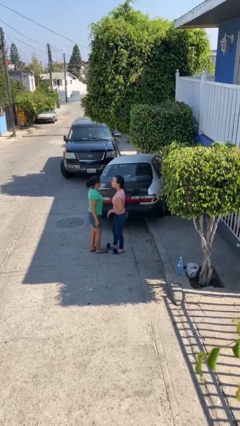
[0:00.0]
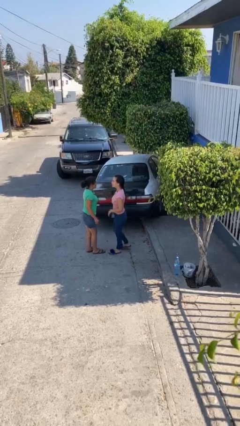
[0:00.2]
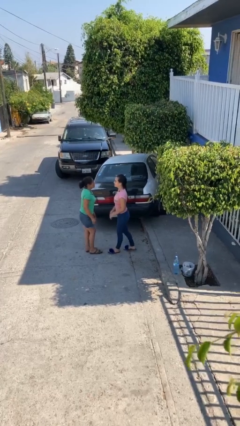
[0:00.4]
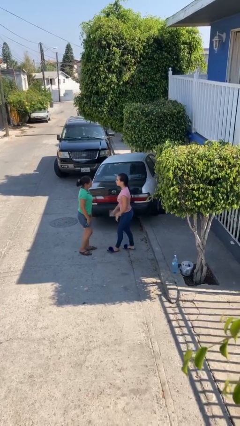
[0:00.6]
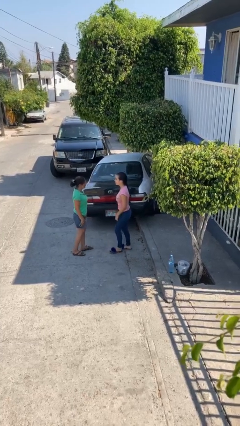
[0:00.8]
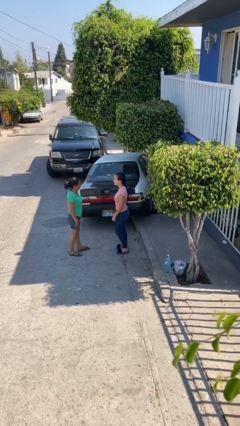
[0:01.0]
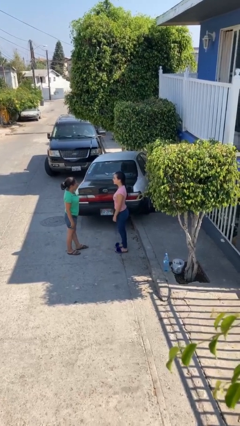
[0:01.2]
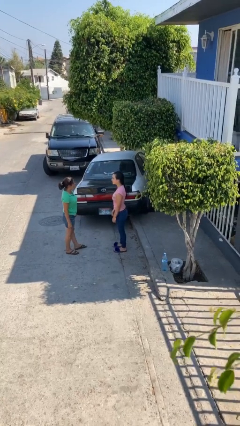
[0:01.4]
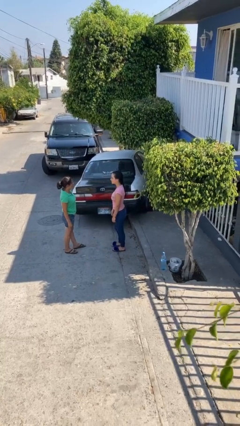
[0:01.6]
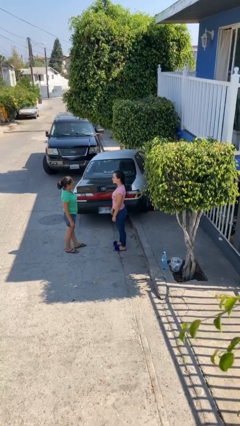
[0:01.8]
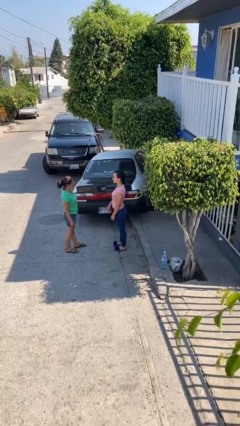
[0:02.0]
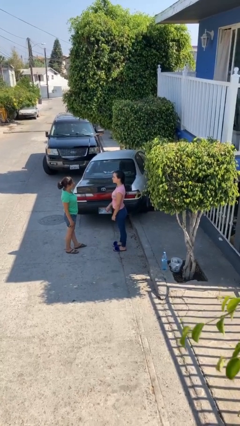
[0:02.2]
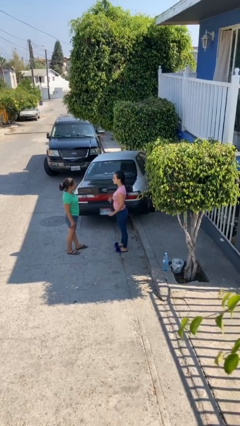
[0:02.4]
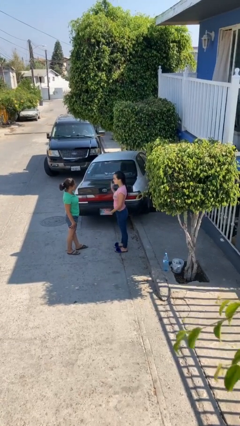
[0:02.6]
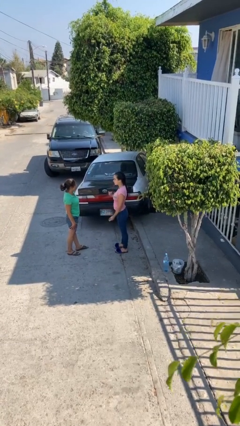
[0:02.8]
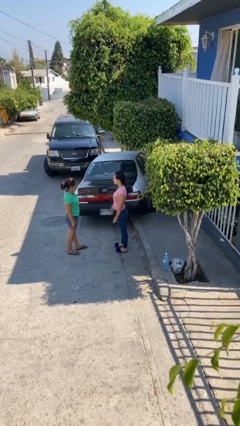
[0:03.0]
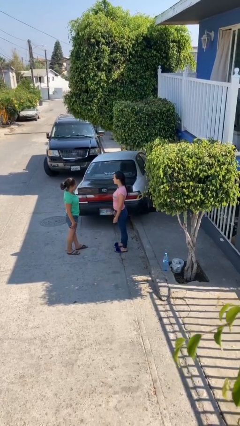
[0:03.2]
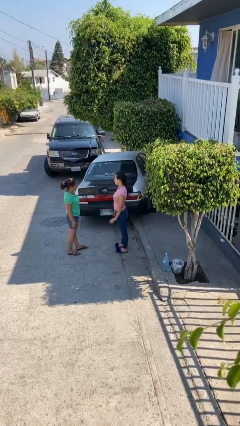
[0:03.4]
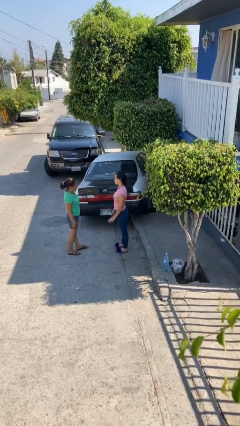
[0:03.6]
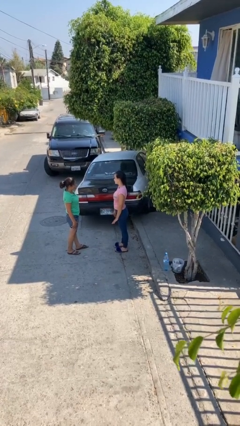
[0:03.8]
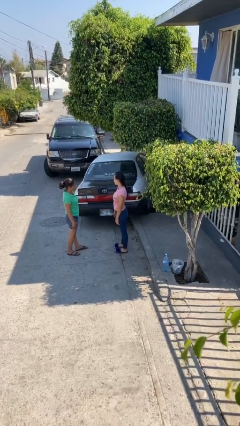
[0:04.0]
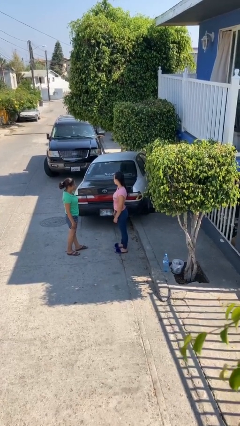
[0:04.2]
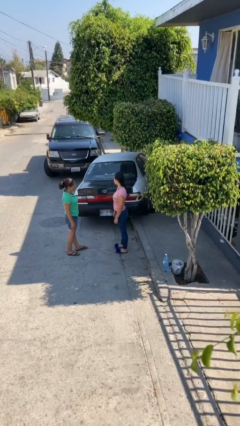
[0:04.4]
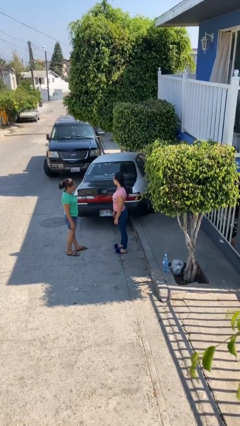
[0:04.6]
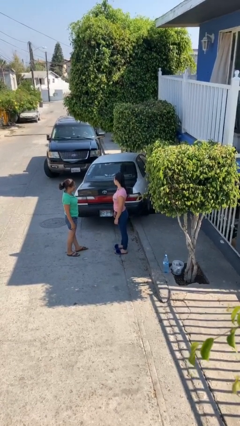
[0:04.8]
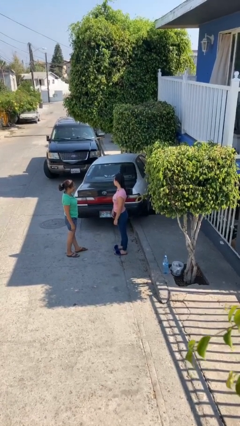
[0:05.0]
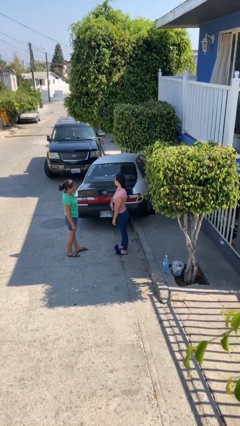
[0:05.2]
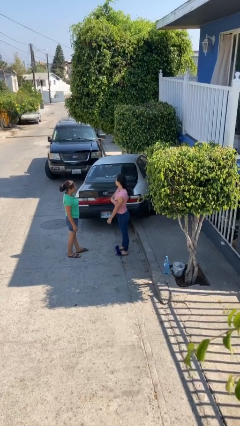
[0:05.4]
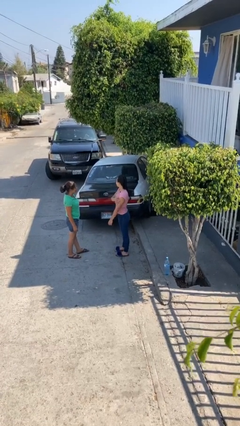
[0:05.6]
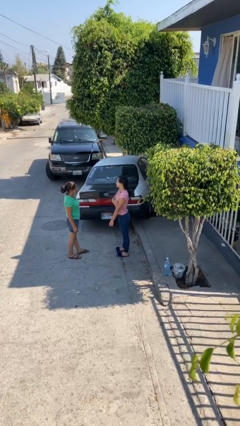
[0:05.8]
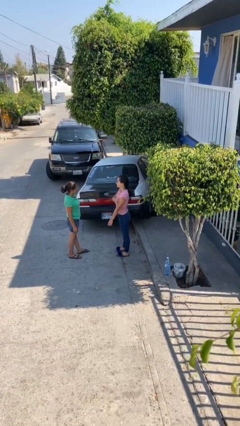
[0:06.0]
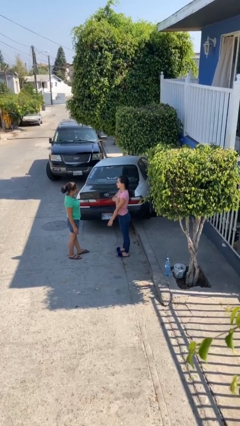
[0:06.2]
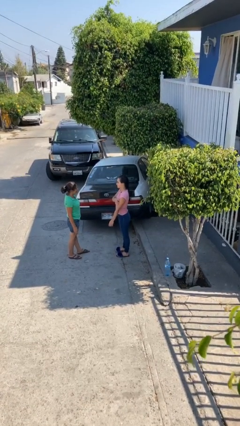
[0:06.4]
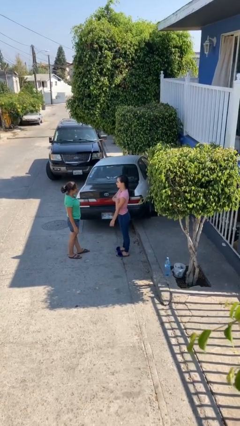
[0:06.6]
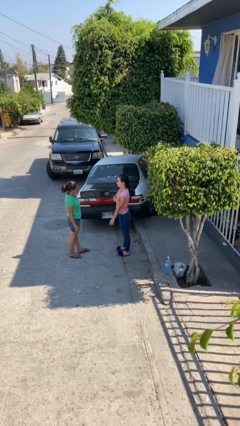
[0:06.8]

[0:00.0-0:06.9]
person talks to person

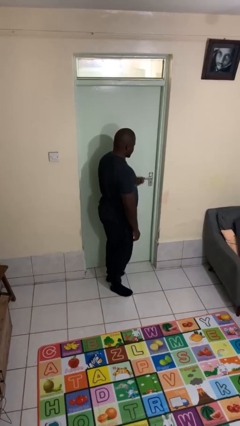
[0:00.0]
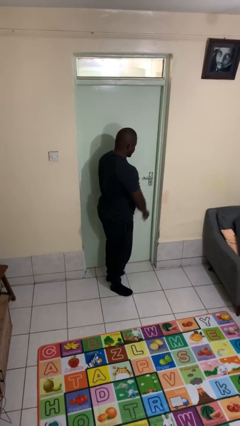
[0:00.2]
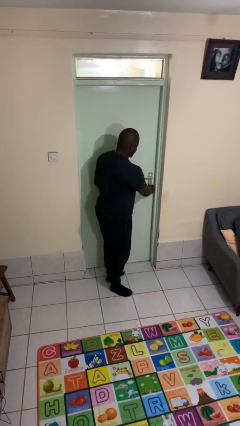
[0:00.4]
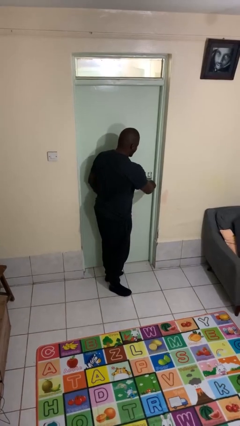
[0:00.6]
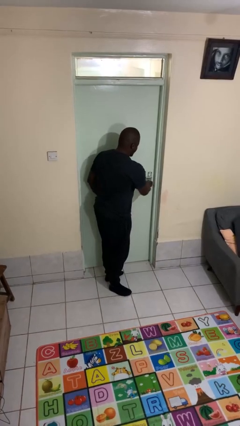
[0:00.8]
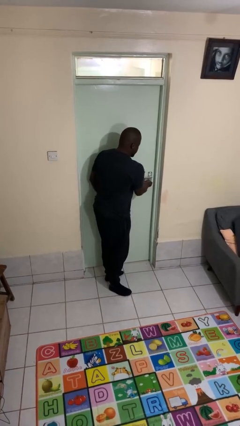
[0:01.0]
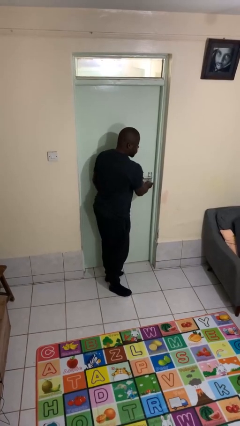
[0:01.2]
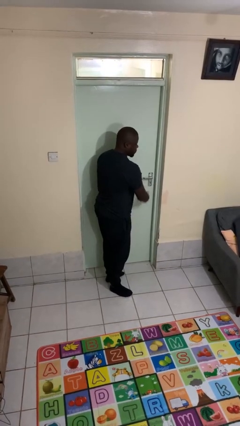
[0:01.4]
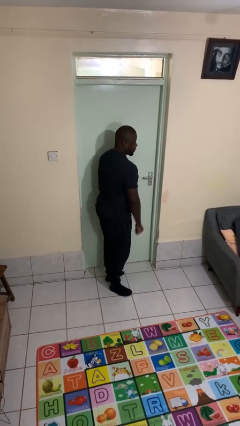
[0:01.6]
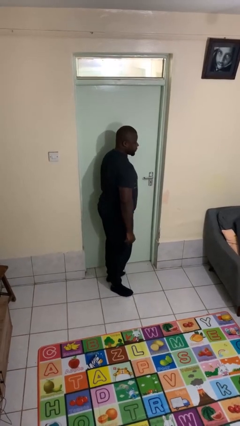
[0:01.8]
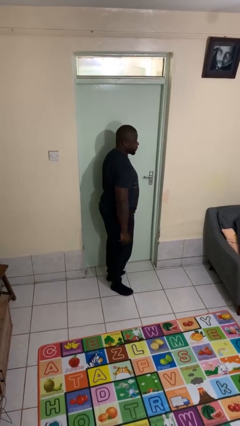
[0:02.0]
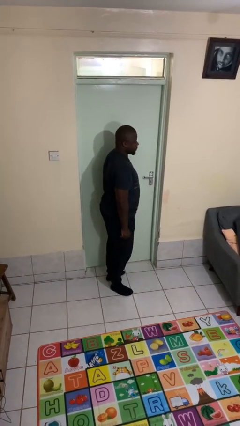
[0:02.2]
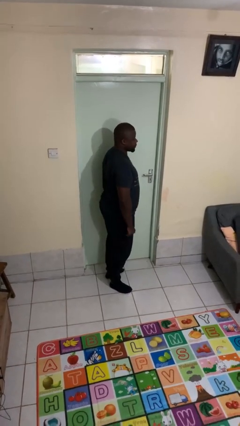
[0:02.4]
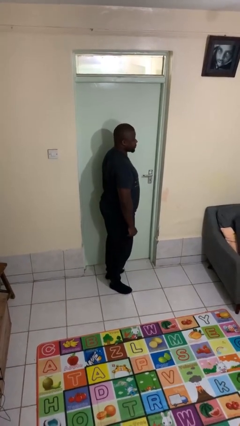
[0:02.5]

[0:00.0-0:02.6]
person locks door with keys

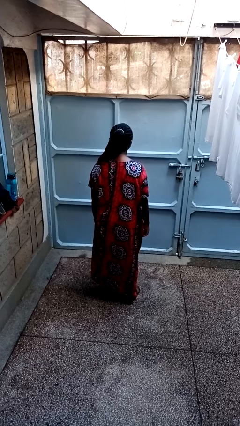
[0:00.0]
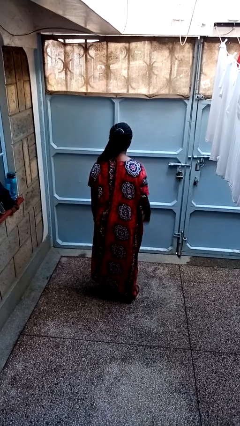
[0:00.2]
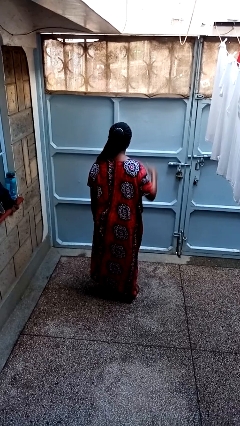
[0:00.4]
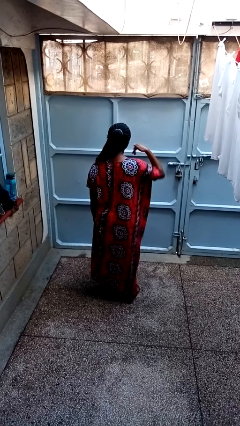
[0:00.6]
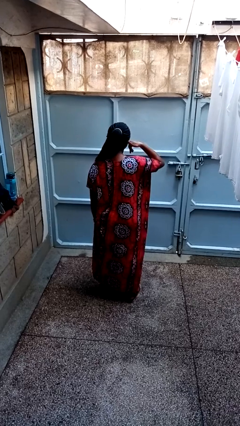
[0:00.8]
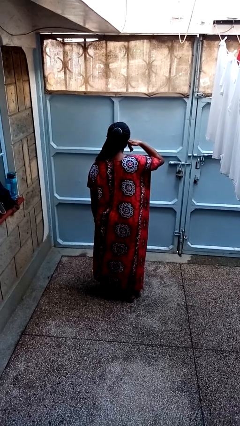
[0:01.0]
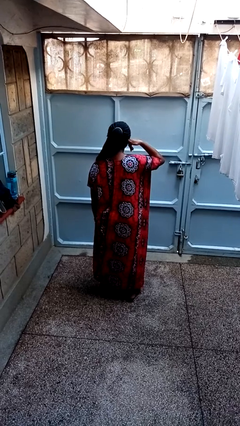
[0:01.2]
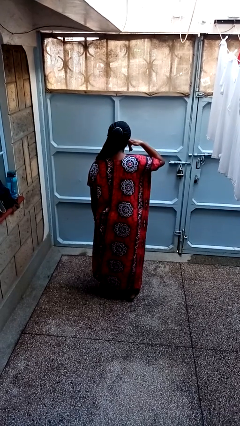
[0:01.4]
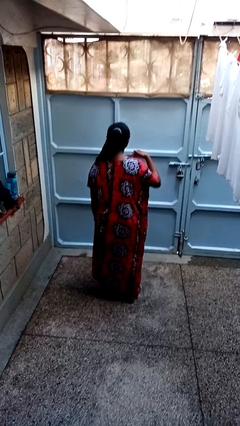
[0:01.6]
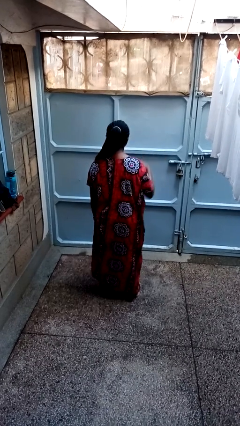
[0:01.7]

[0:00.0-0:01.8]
person gestures call me

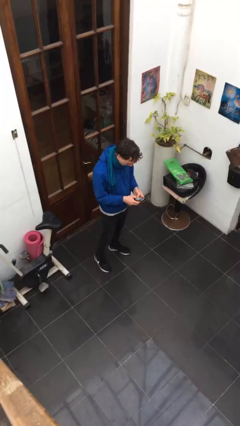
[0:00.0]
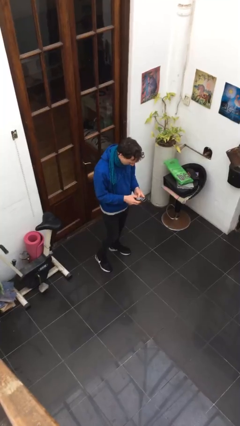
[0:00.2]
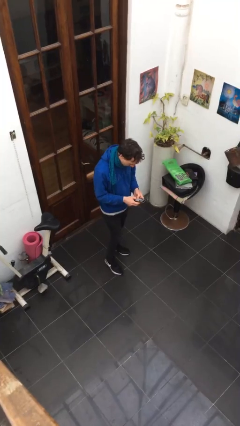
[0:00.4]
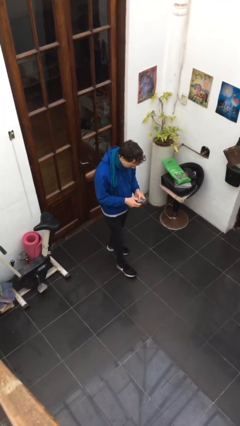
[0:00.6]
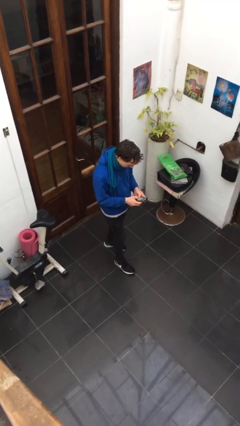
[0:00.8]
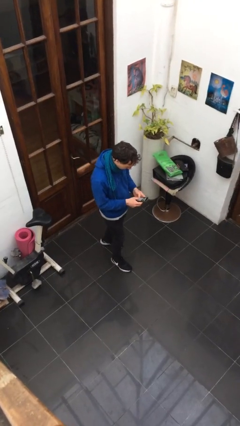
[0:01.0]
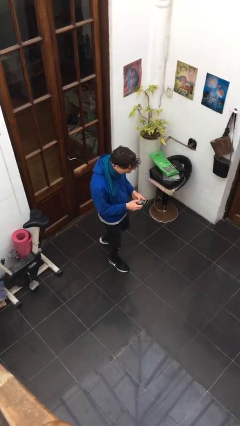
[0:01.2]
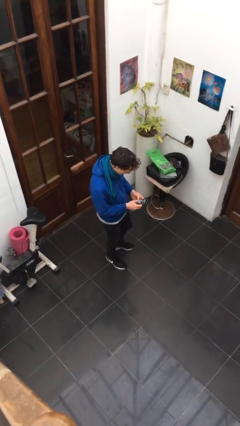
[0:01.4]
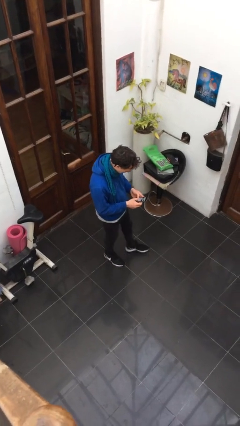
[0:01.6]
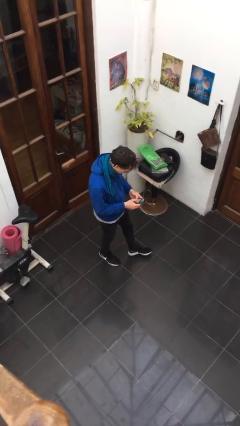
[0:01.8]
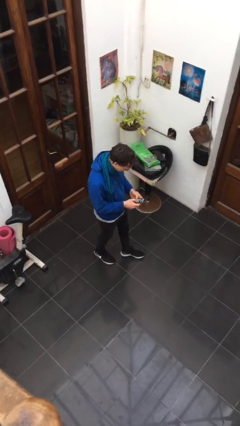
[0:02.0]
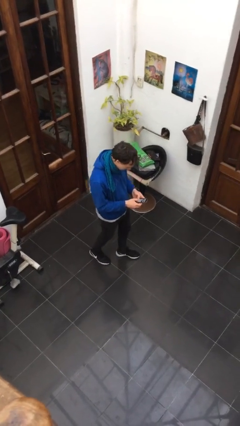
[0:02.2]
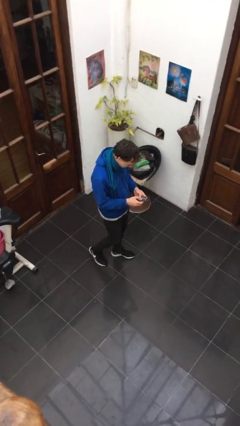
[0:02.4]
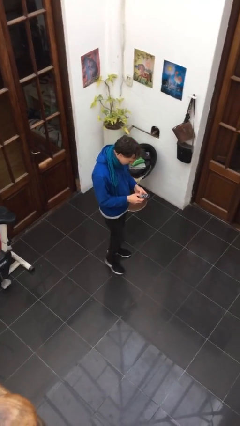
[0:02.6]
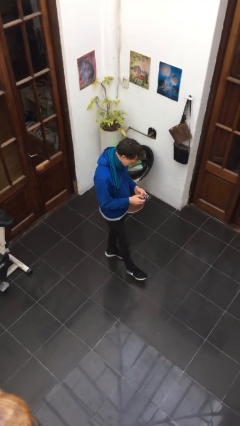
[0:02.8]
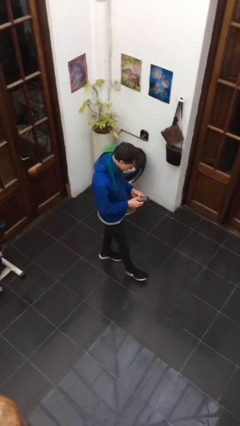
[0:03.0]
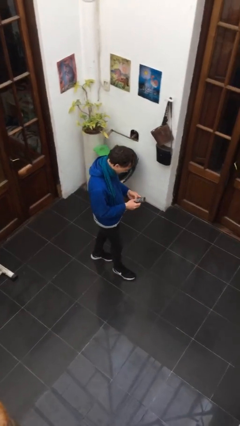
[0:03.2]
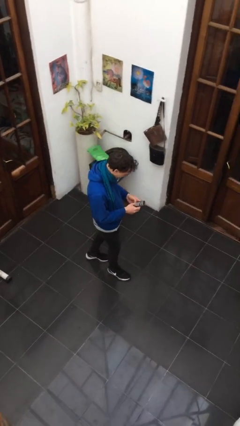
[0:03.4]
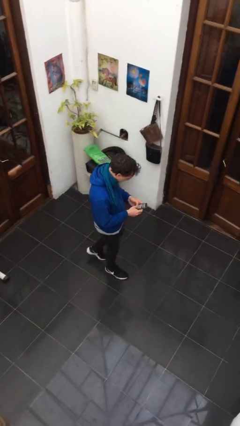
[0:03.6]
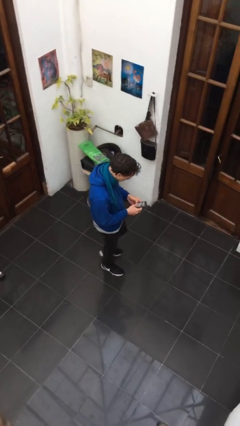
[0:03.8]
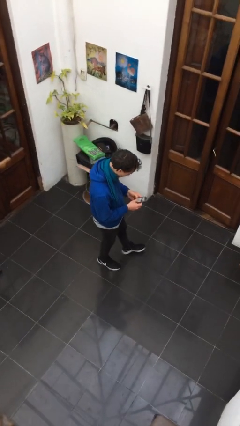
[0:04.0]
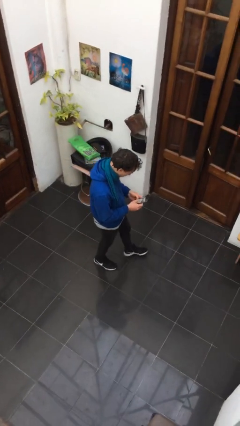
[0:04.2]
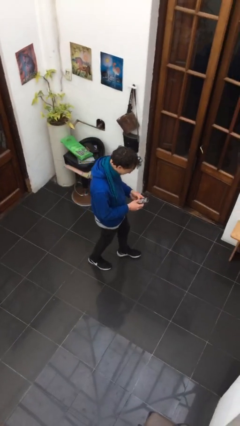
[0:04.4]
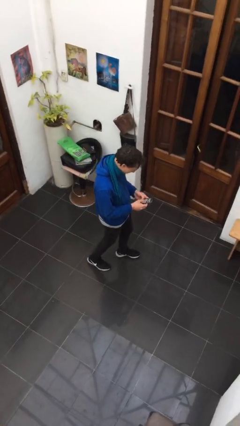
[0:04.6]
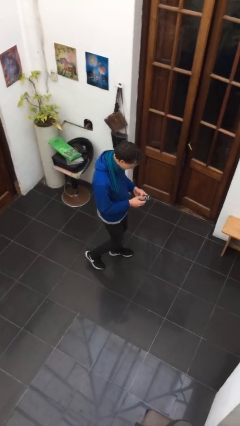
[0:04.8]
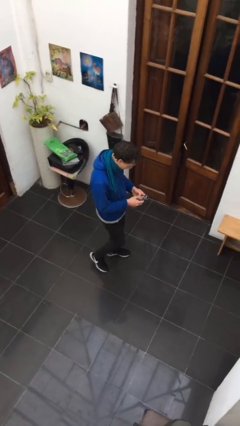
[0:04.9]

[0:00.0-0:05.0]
person texts on phone

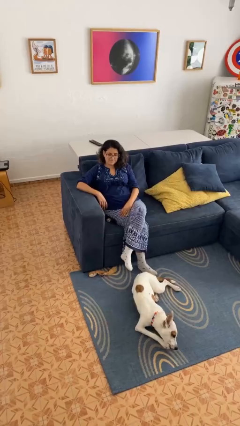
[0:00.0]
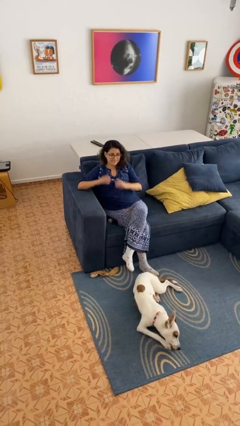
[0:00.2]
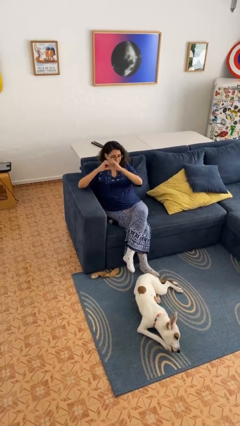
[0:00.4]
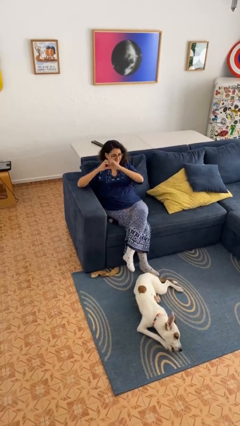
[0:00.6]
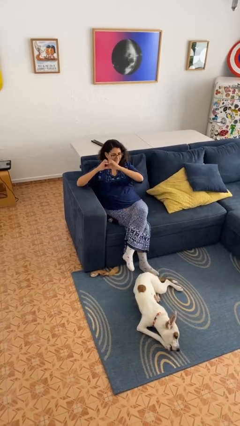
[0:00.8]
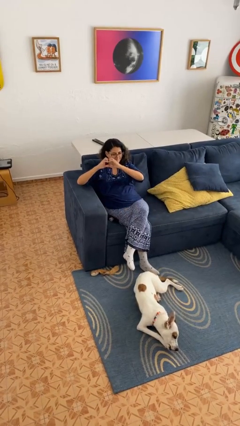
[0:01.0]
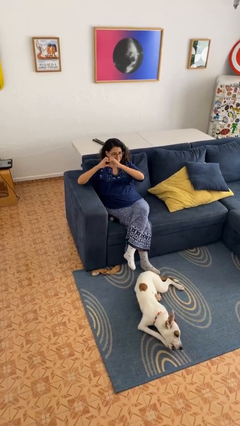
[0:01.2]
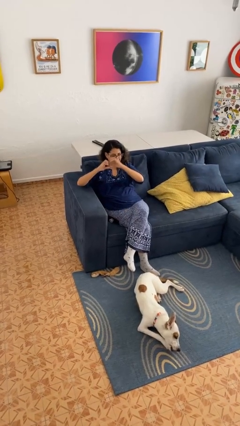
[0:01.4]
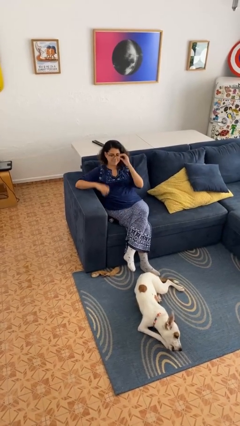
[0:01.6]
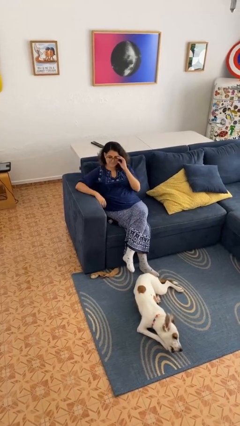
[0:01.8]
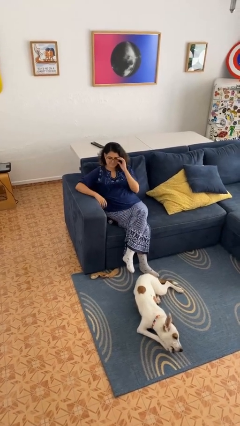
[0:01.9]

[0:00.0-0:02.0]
person gestures heart
